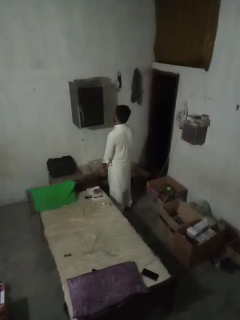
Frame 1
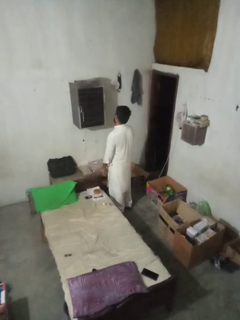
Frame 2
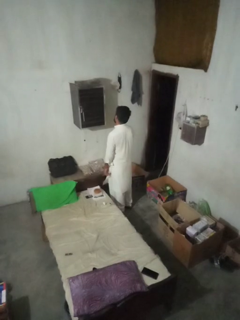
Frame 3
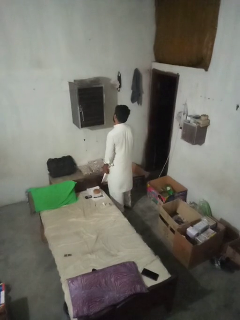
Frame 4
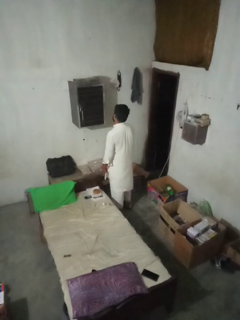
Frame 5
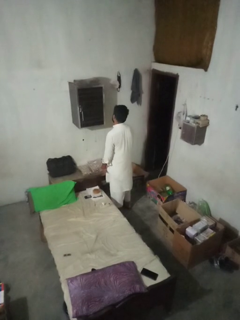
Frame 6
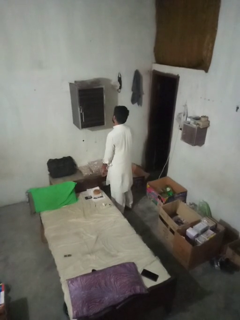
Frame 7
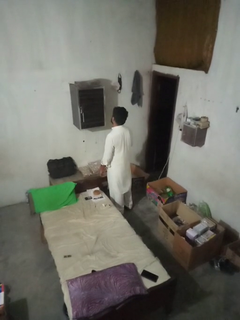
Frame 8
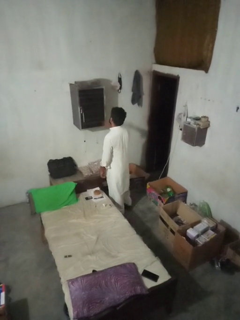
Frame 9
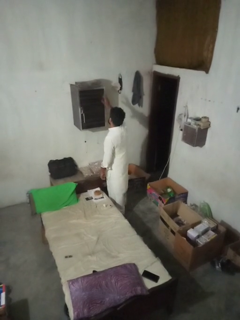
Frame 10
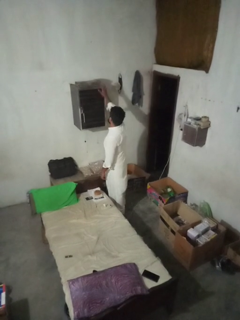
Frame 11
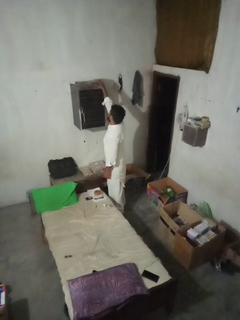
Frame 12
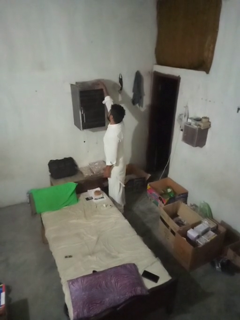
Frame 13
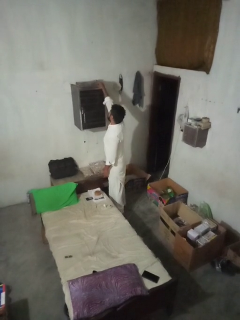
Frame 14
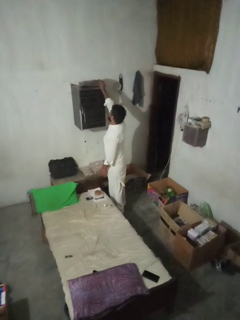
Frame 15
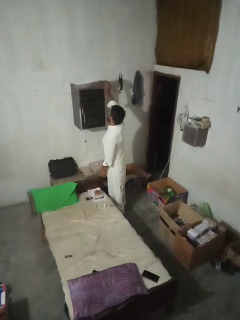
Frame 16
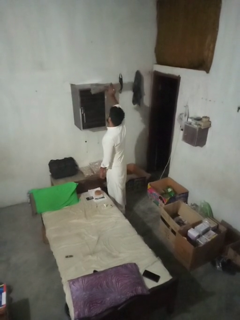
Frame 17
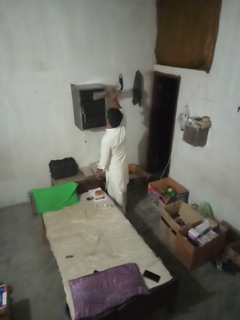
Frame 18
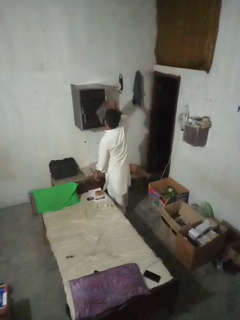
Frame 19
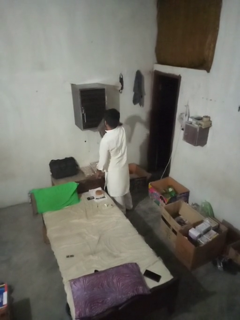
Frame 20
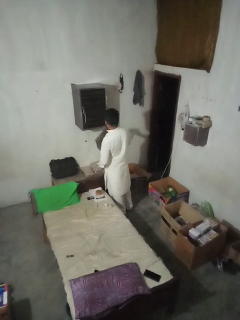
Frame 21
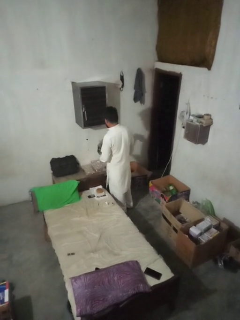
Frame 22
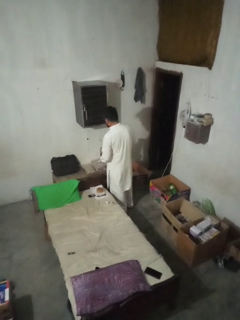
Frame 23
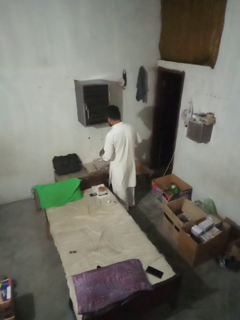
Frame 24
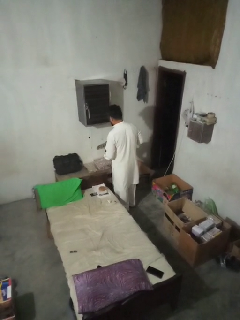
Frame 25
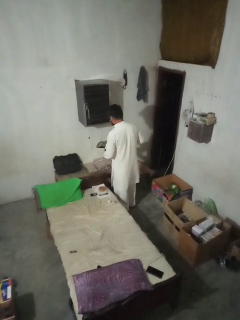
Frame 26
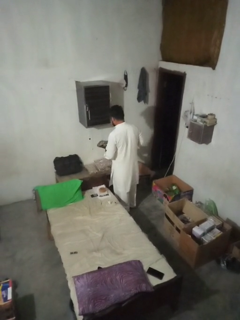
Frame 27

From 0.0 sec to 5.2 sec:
person picks up object from shelf

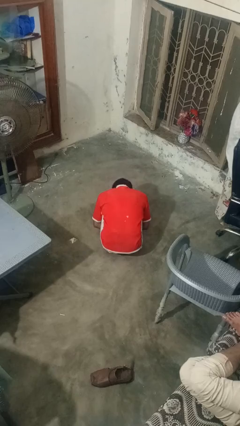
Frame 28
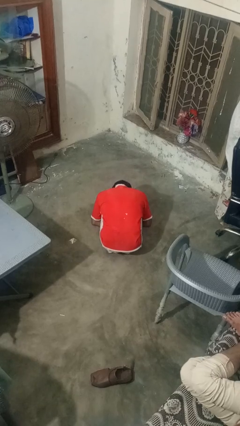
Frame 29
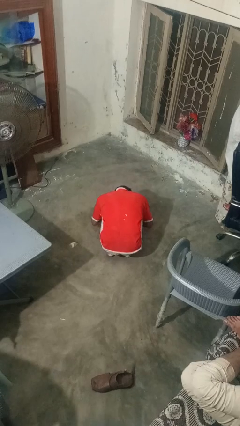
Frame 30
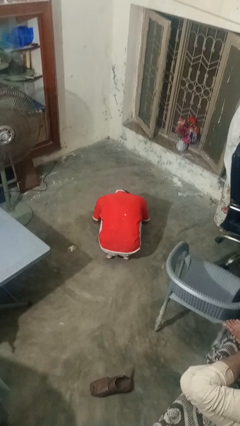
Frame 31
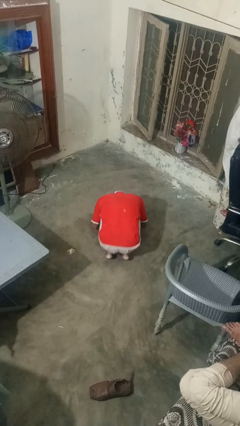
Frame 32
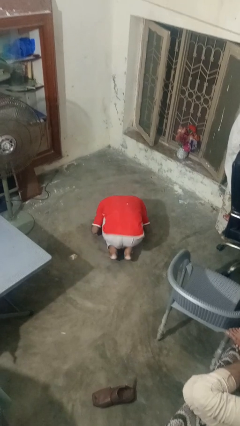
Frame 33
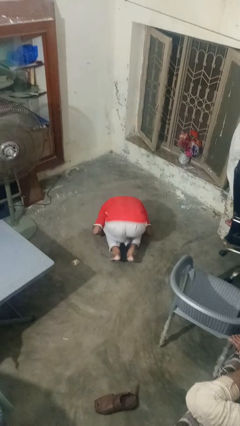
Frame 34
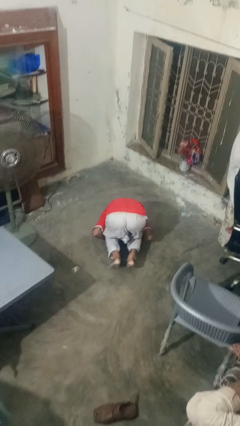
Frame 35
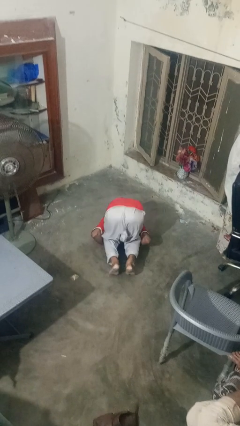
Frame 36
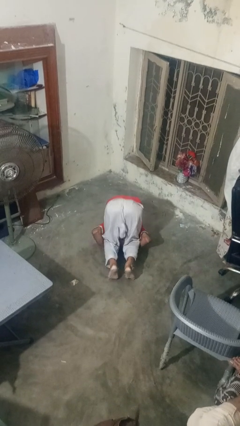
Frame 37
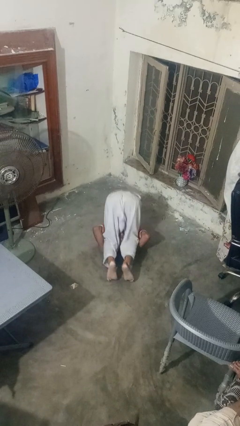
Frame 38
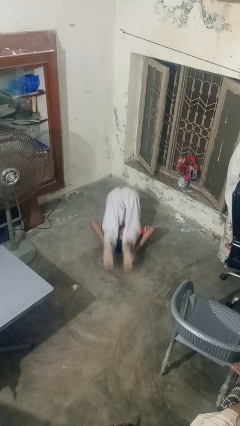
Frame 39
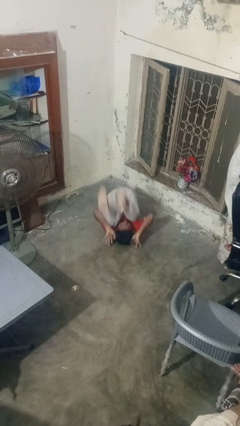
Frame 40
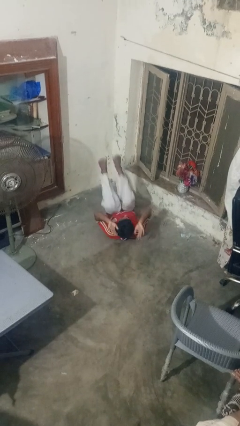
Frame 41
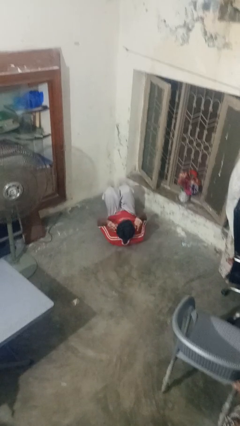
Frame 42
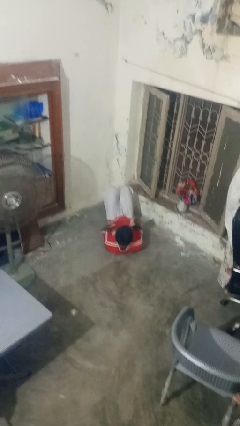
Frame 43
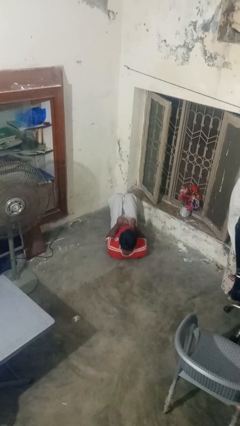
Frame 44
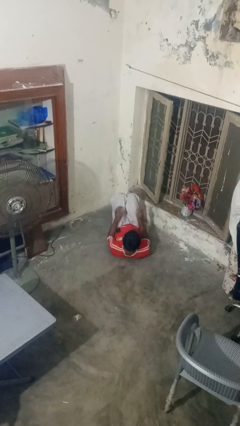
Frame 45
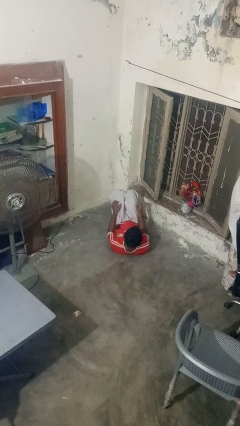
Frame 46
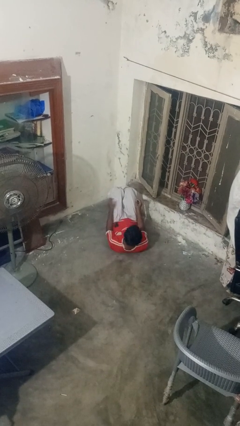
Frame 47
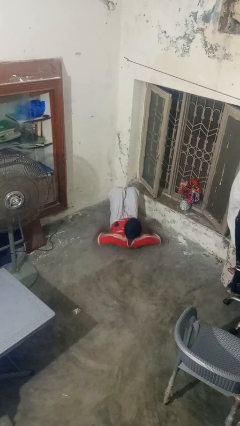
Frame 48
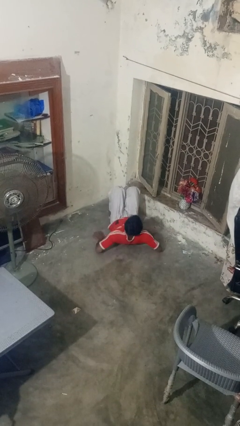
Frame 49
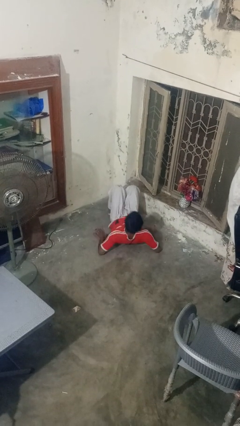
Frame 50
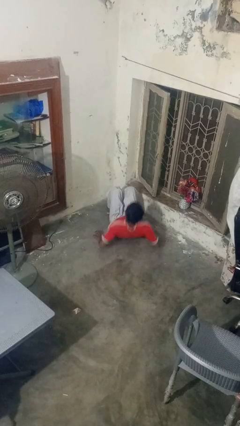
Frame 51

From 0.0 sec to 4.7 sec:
person somersaults

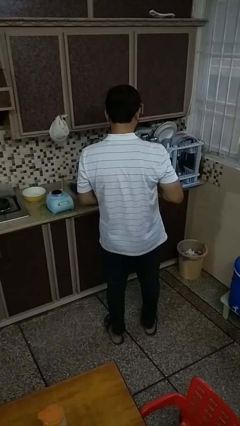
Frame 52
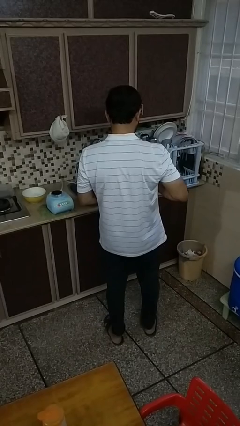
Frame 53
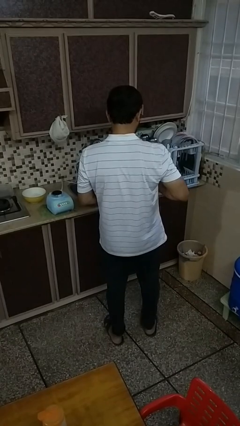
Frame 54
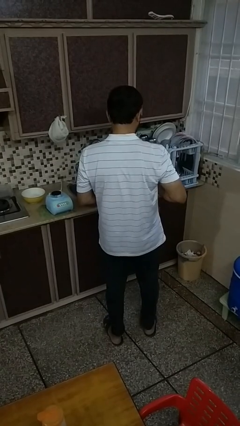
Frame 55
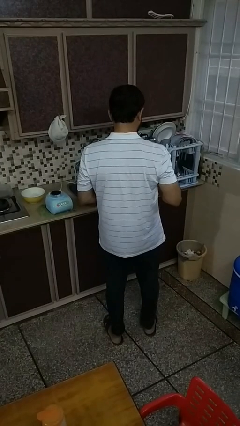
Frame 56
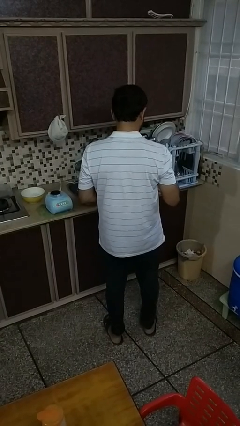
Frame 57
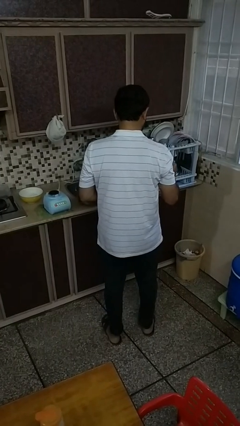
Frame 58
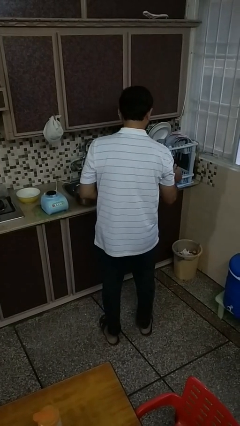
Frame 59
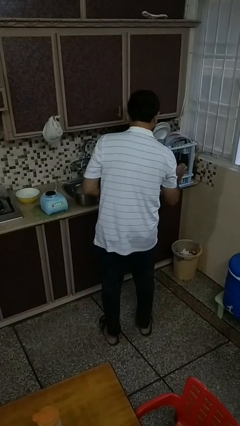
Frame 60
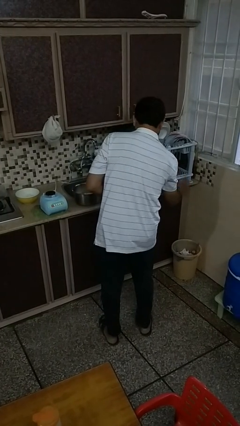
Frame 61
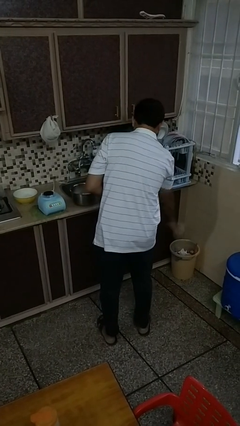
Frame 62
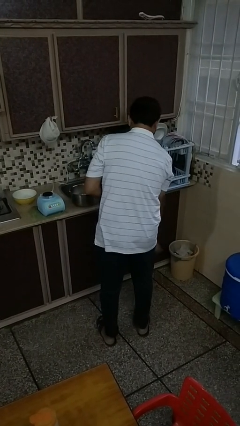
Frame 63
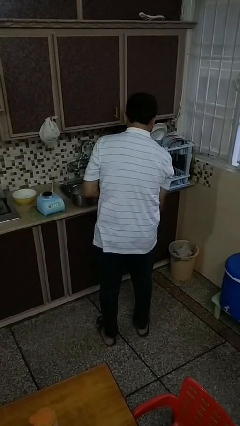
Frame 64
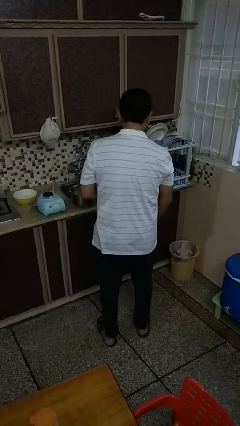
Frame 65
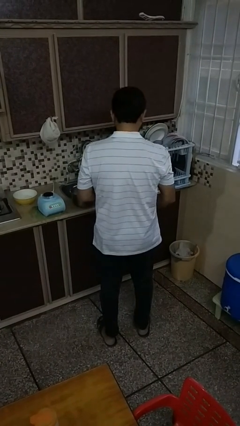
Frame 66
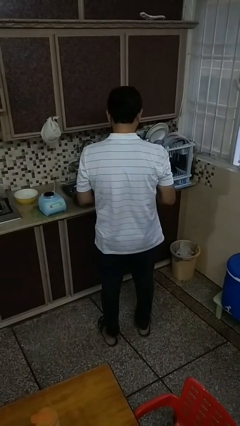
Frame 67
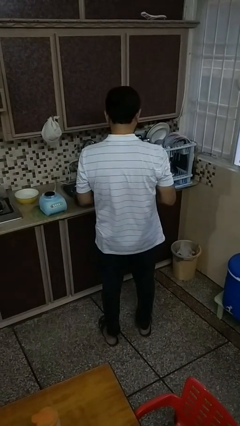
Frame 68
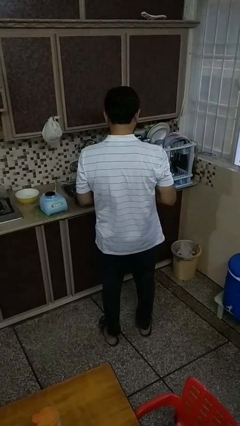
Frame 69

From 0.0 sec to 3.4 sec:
person discards trash

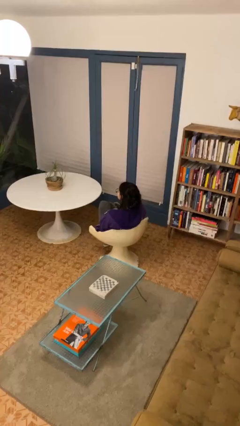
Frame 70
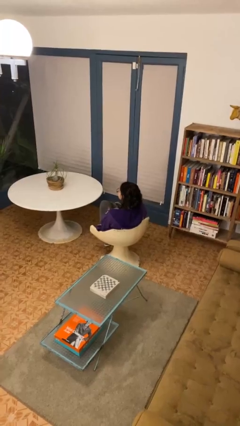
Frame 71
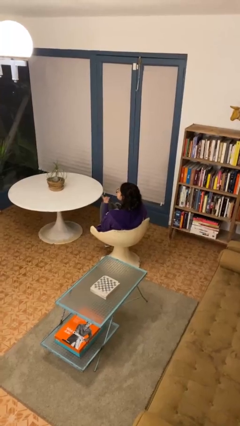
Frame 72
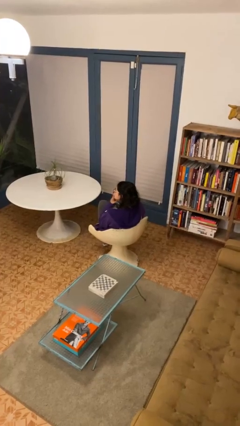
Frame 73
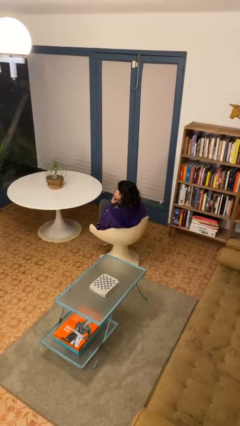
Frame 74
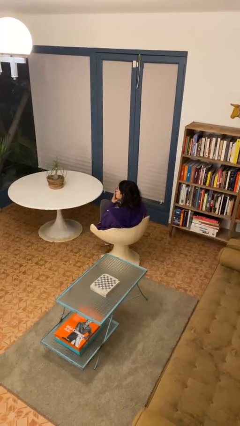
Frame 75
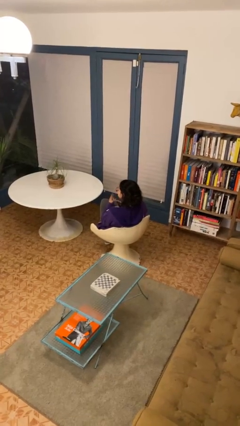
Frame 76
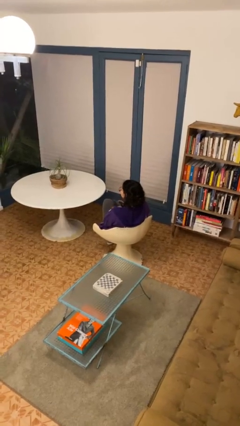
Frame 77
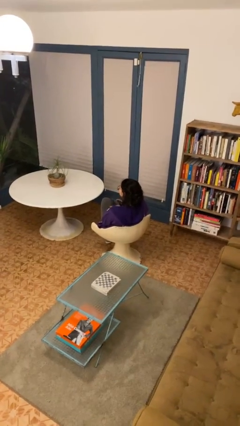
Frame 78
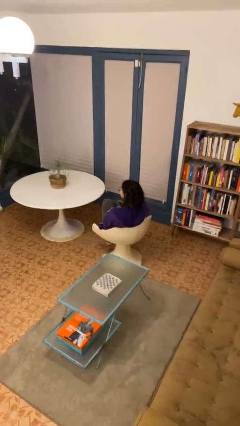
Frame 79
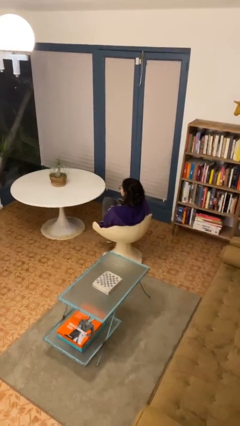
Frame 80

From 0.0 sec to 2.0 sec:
person gestures be quiet

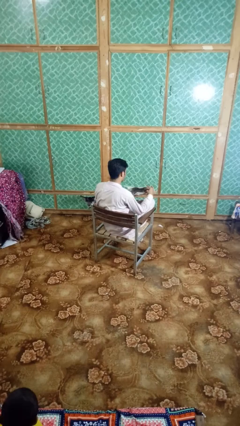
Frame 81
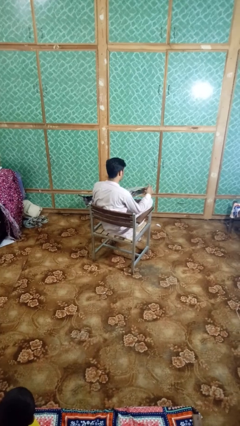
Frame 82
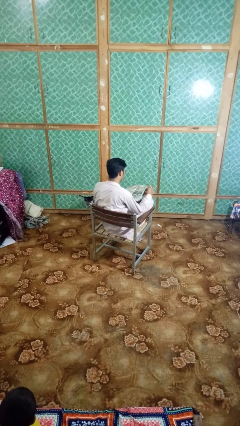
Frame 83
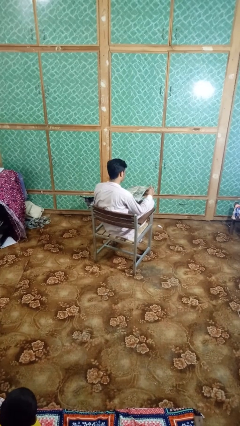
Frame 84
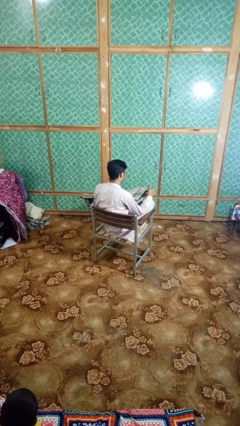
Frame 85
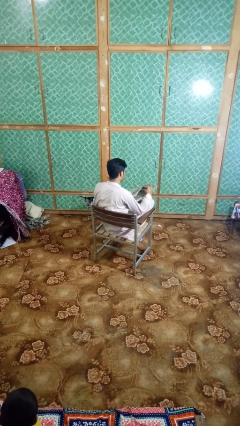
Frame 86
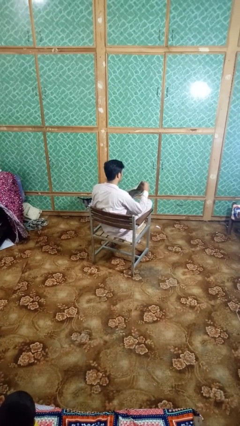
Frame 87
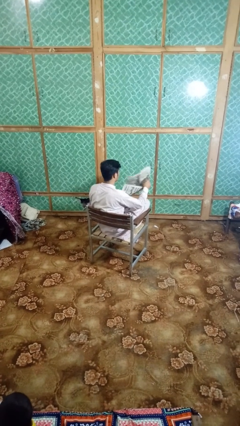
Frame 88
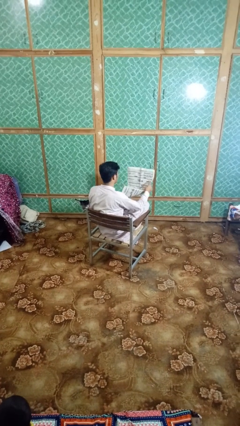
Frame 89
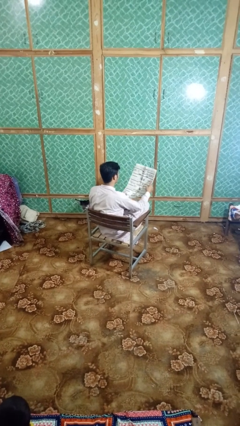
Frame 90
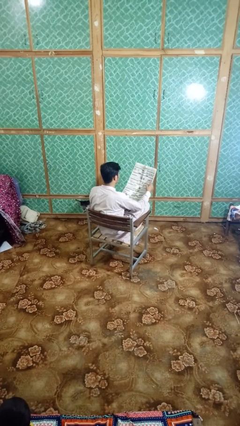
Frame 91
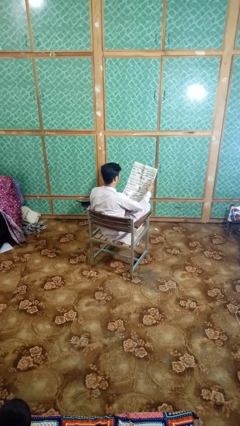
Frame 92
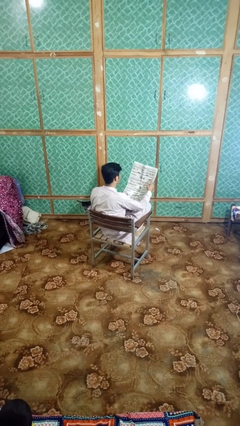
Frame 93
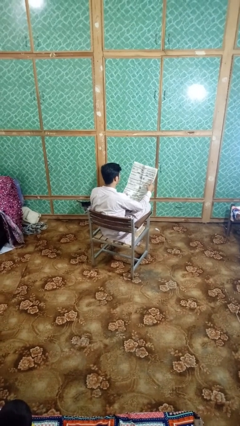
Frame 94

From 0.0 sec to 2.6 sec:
person reads newspaper

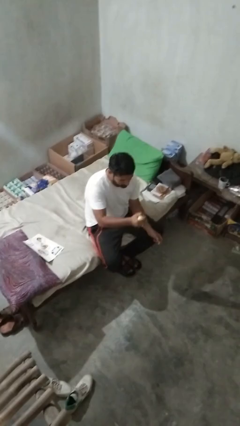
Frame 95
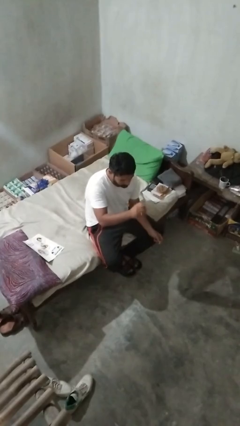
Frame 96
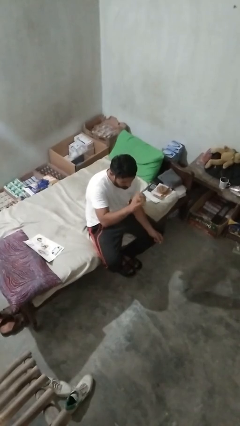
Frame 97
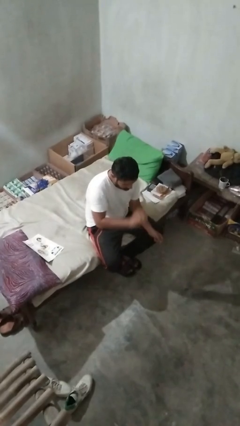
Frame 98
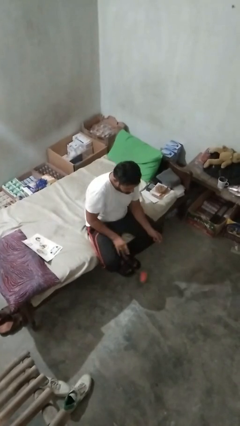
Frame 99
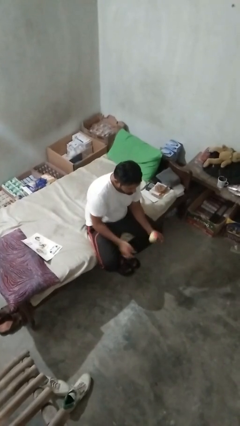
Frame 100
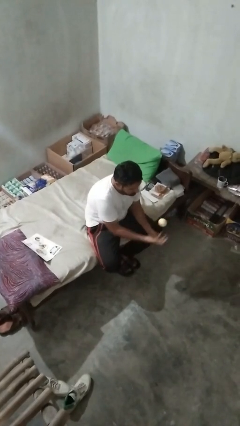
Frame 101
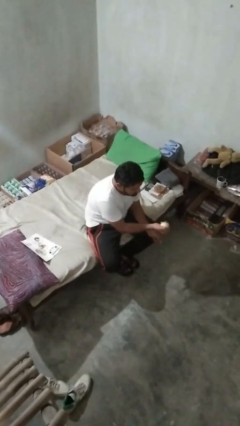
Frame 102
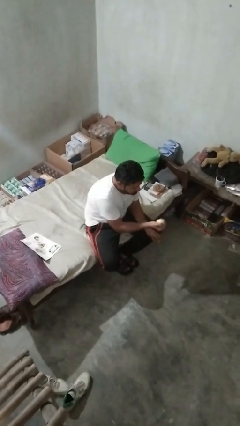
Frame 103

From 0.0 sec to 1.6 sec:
person bounces ball on floor
